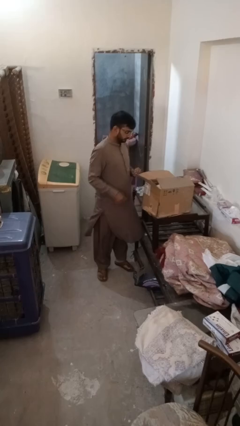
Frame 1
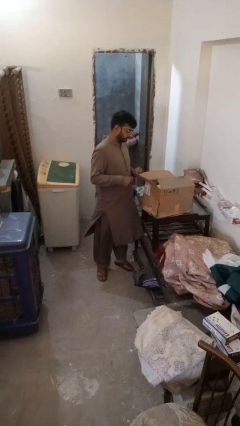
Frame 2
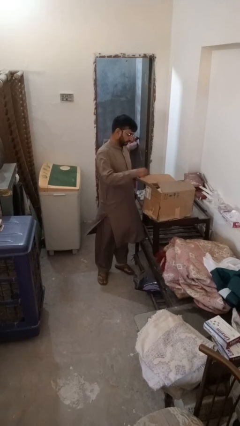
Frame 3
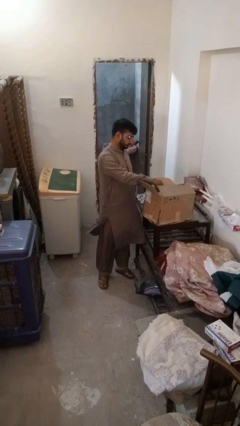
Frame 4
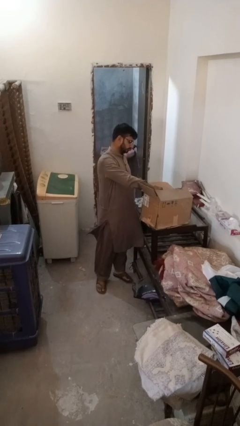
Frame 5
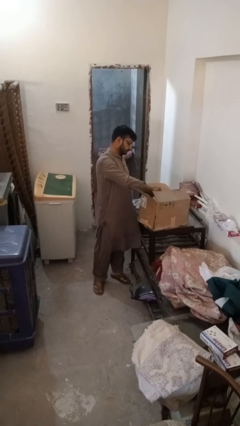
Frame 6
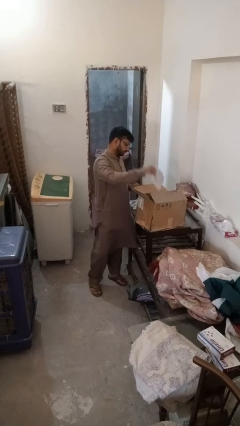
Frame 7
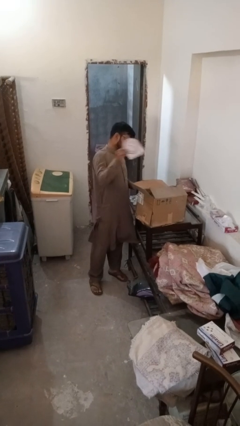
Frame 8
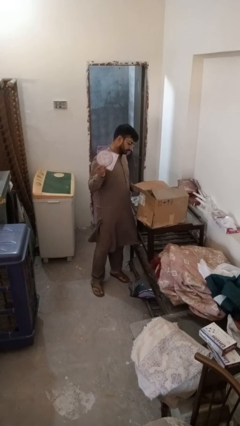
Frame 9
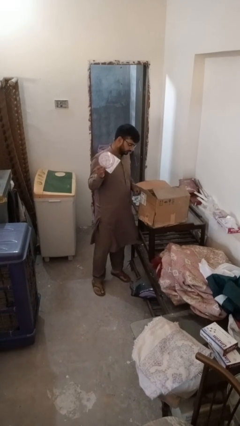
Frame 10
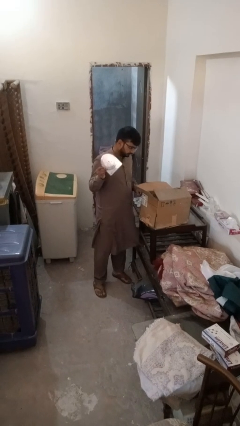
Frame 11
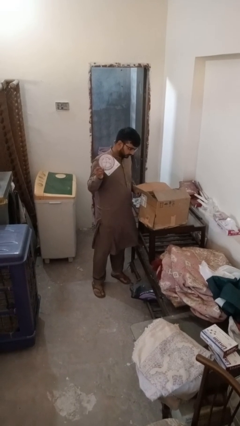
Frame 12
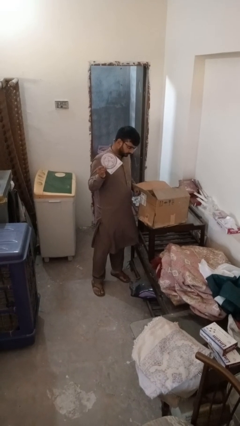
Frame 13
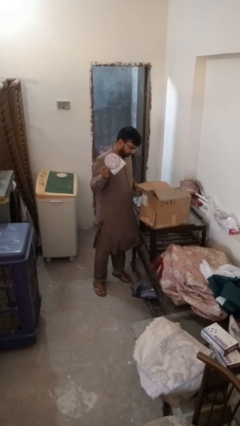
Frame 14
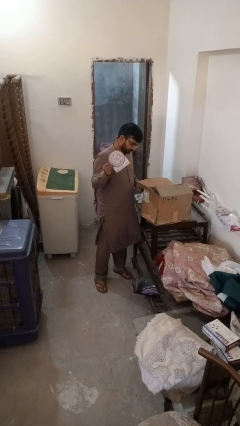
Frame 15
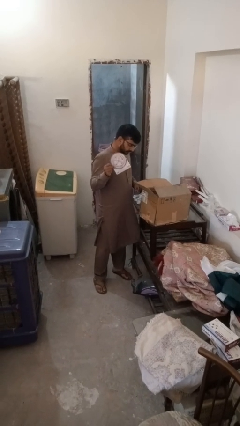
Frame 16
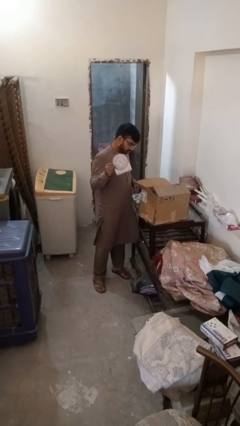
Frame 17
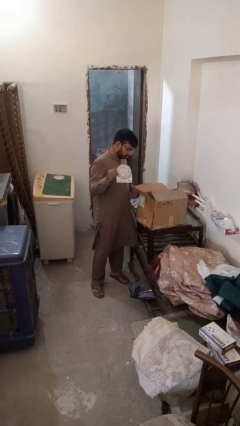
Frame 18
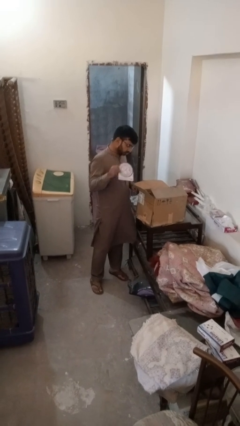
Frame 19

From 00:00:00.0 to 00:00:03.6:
person takes object from box

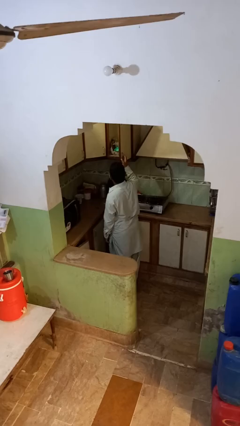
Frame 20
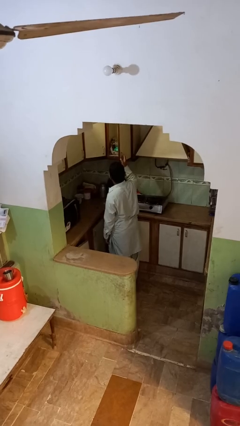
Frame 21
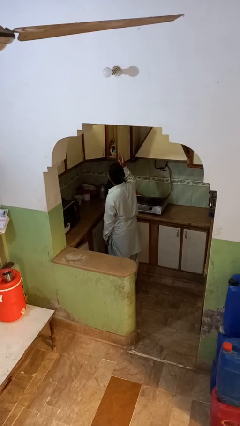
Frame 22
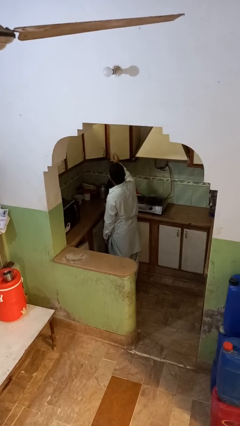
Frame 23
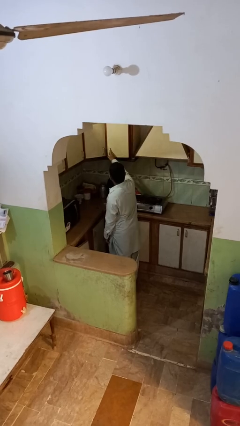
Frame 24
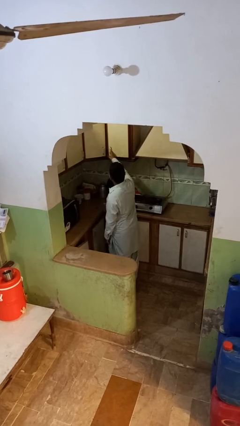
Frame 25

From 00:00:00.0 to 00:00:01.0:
person closes cabinet

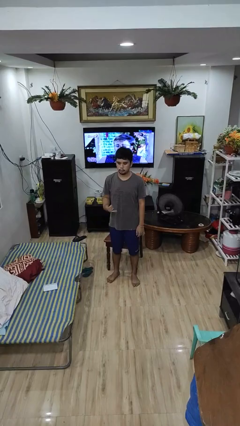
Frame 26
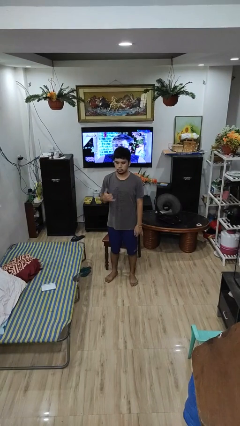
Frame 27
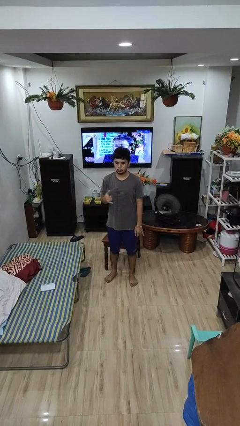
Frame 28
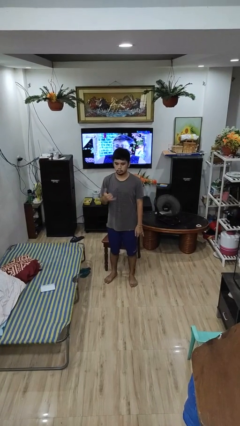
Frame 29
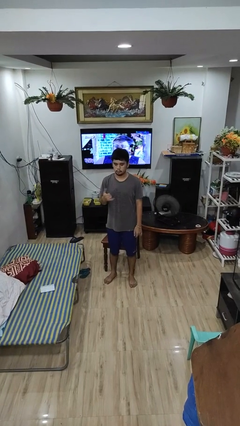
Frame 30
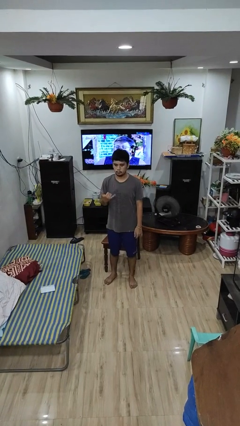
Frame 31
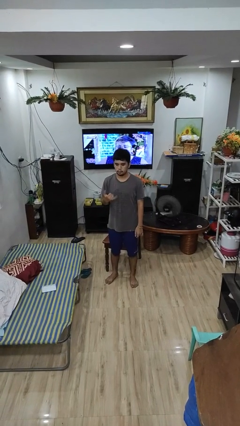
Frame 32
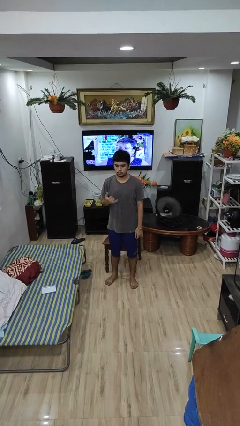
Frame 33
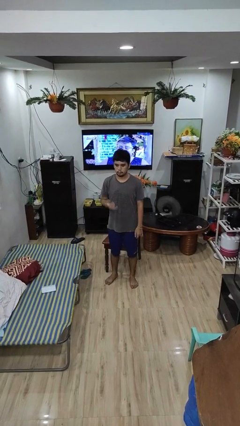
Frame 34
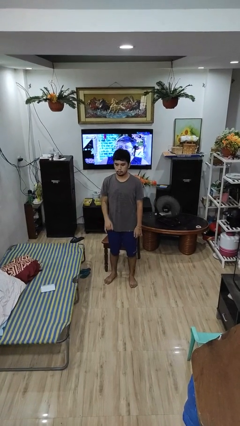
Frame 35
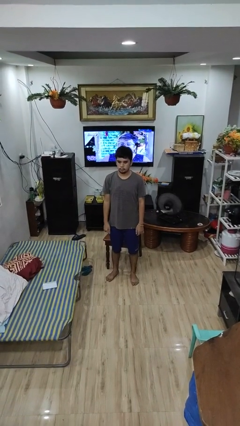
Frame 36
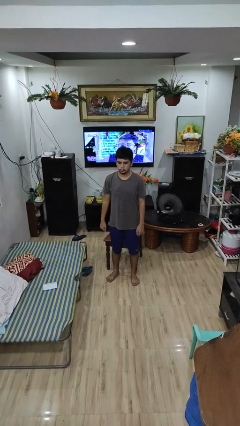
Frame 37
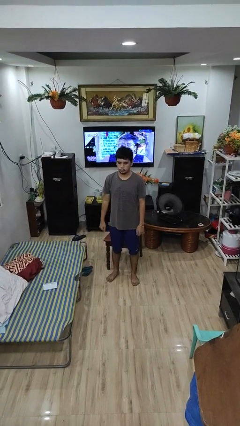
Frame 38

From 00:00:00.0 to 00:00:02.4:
person gestures hang loose

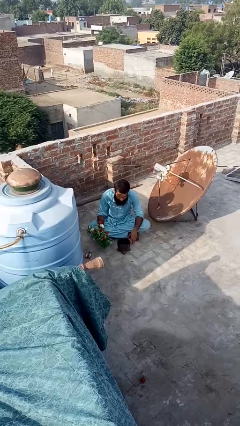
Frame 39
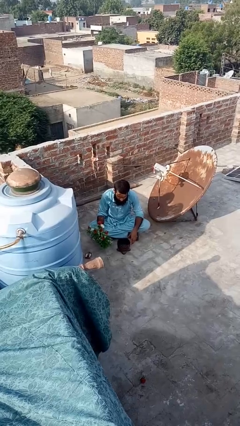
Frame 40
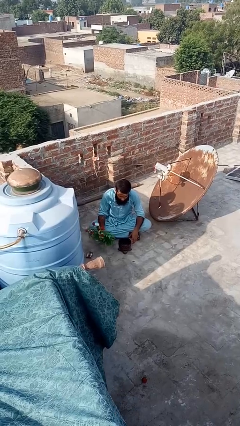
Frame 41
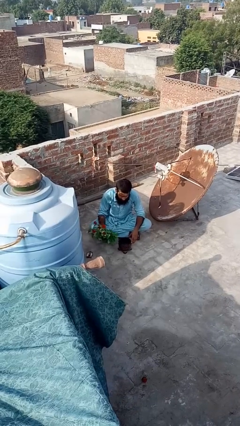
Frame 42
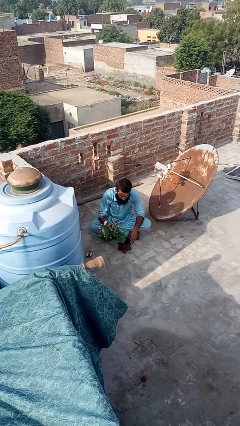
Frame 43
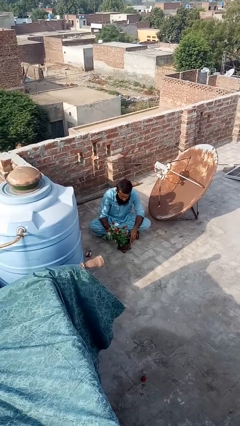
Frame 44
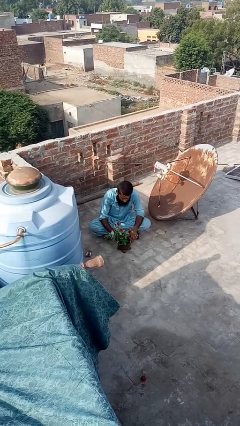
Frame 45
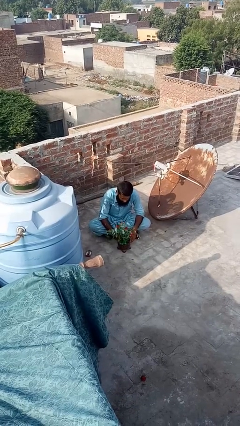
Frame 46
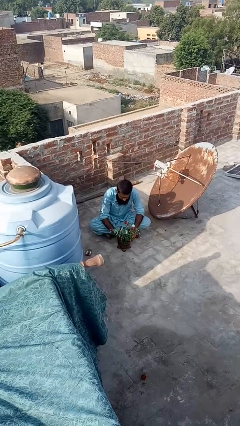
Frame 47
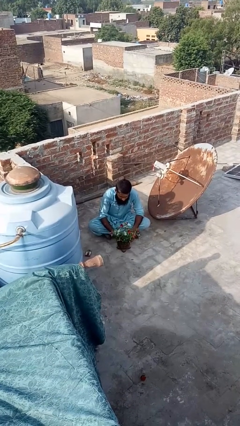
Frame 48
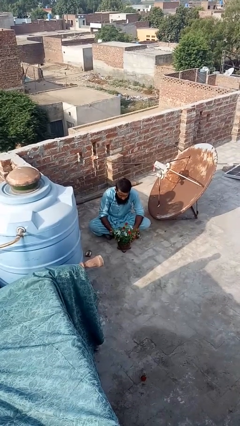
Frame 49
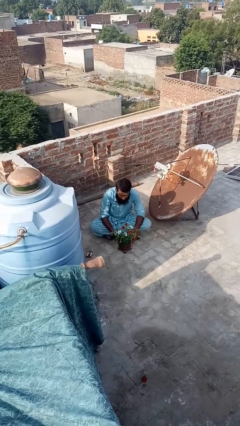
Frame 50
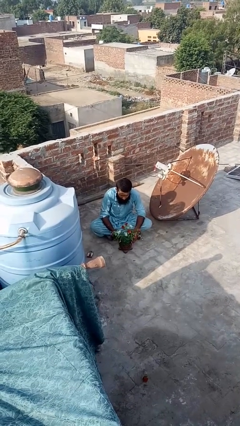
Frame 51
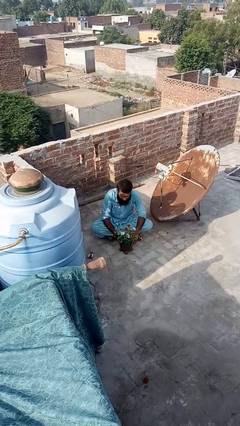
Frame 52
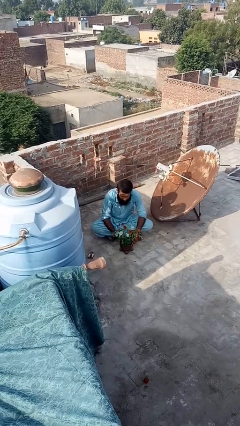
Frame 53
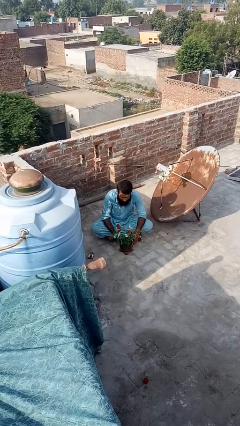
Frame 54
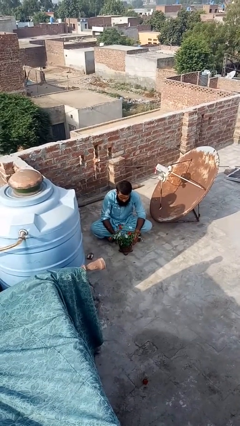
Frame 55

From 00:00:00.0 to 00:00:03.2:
person arranges flowers in vase

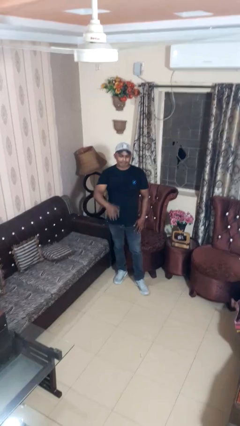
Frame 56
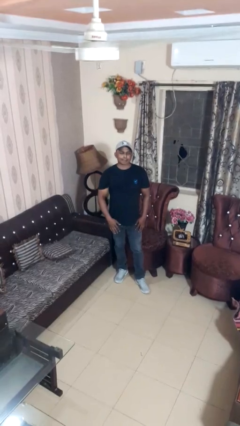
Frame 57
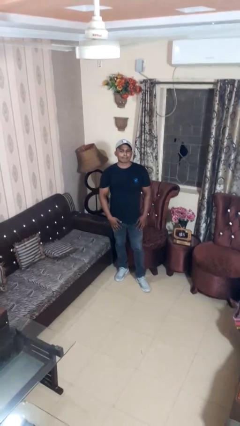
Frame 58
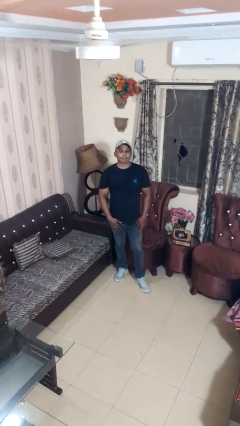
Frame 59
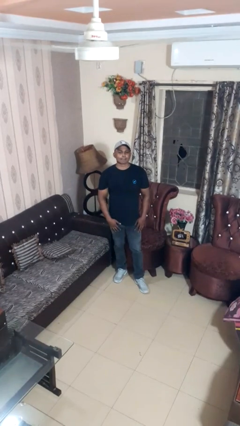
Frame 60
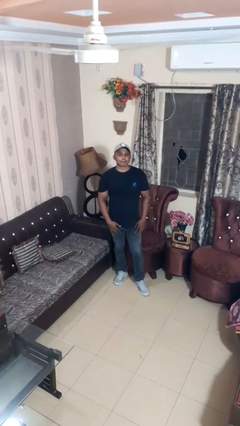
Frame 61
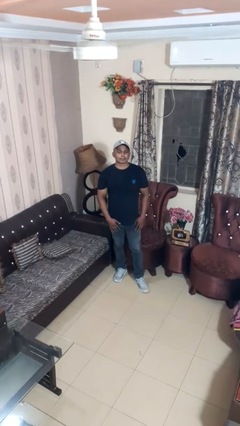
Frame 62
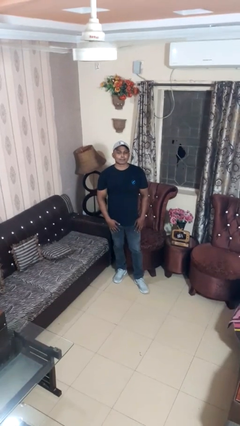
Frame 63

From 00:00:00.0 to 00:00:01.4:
person gestures swipe down

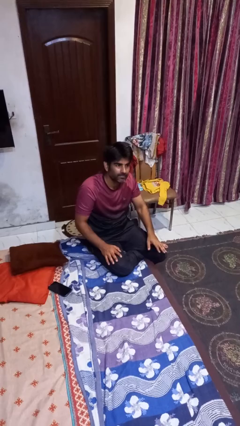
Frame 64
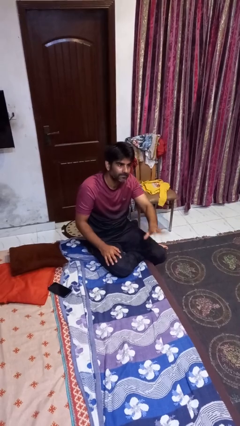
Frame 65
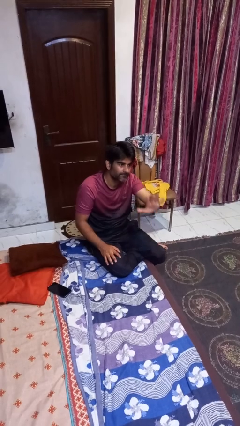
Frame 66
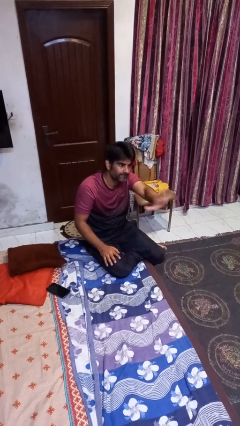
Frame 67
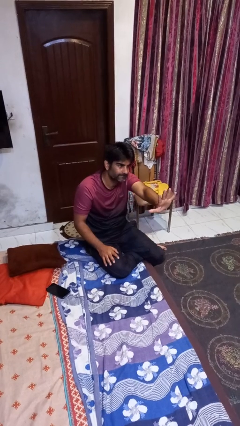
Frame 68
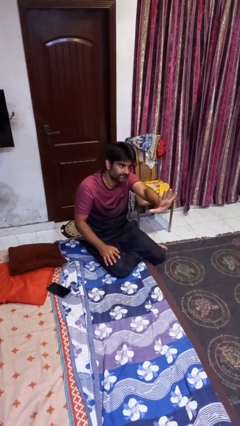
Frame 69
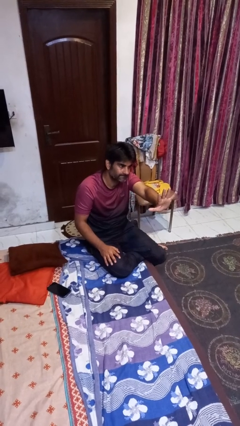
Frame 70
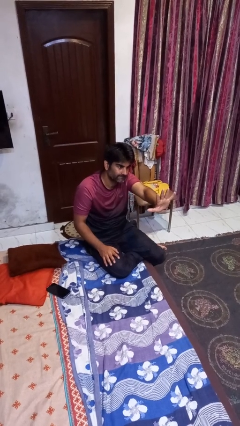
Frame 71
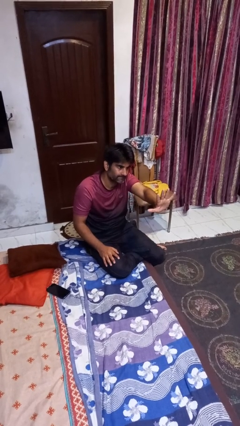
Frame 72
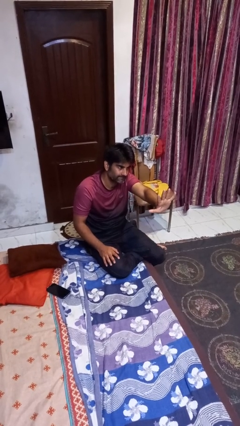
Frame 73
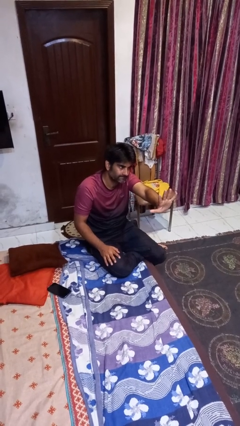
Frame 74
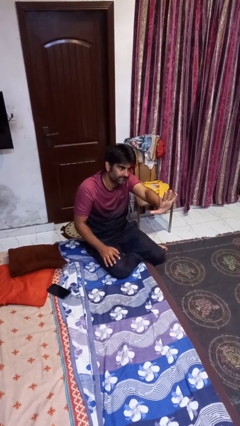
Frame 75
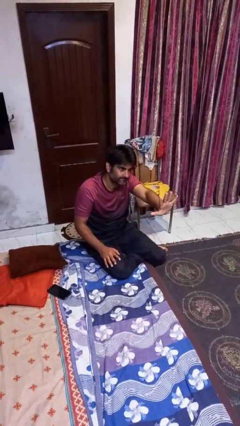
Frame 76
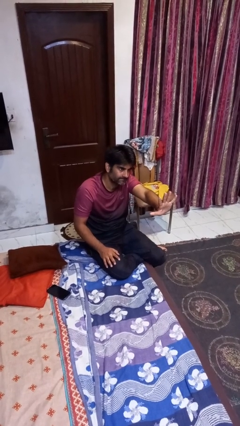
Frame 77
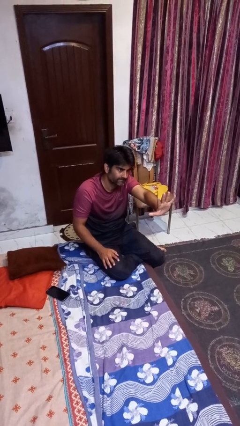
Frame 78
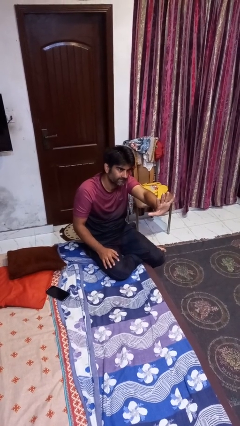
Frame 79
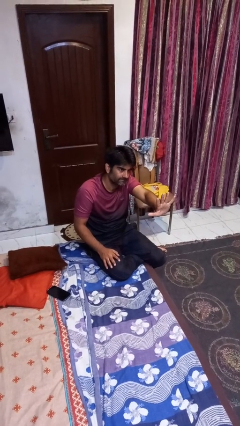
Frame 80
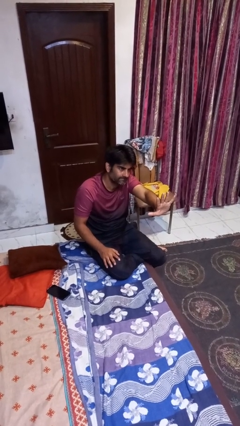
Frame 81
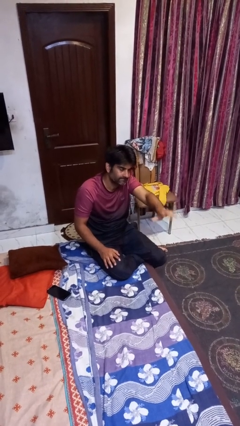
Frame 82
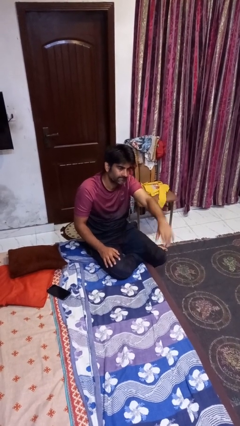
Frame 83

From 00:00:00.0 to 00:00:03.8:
person gestures number five

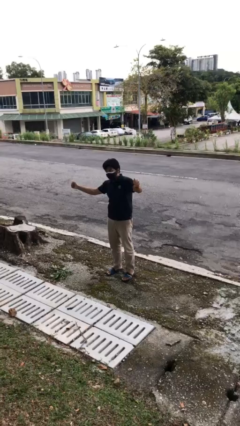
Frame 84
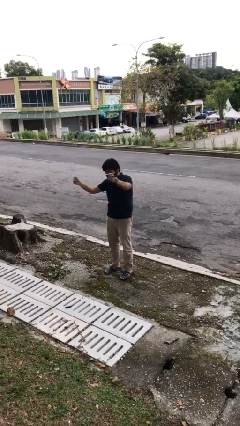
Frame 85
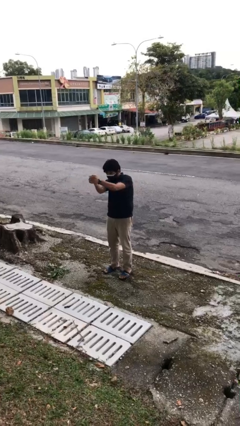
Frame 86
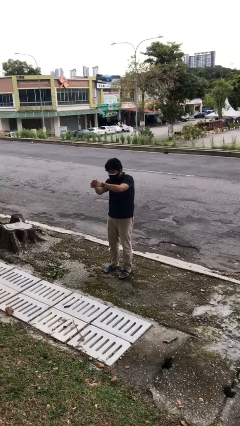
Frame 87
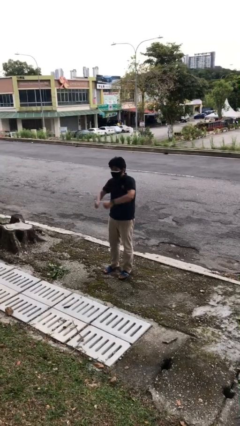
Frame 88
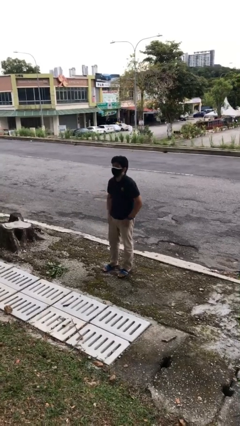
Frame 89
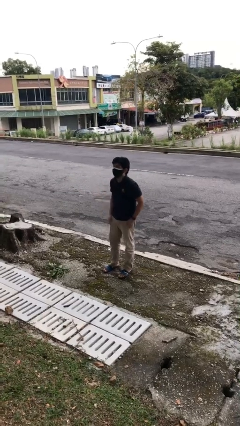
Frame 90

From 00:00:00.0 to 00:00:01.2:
person gestures zoom out

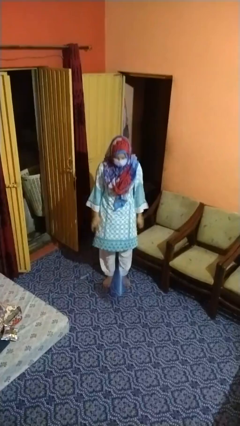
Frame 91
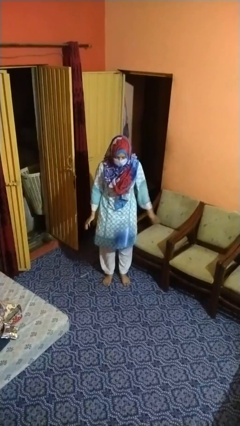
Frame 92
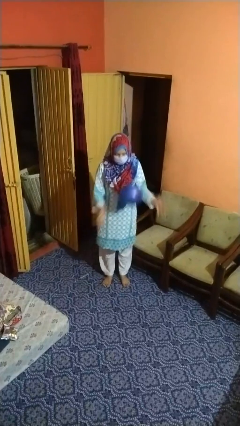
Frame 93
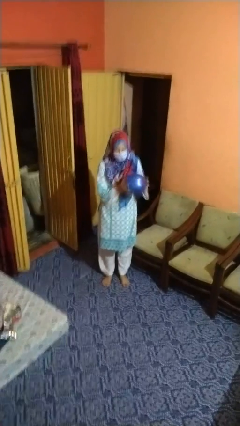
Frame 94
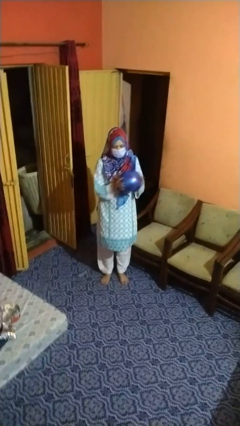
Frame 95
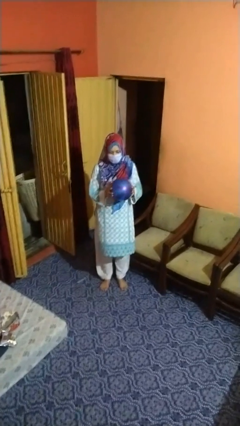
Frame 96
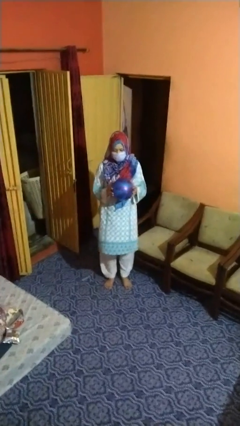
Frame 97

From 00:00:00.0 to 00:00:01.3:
person bounces ball on floor
